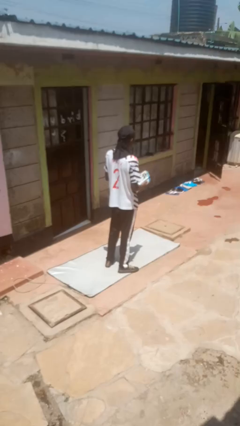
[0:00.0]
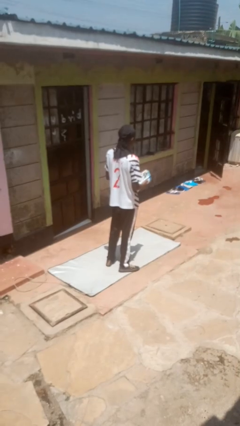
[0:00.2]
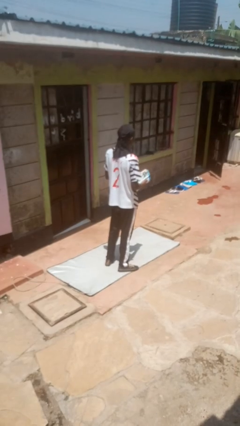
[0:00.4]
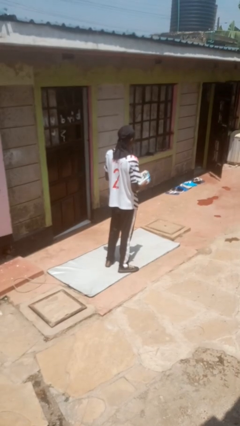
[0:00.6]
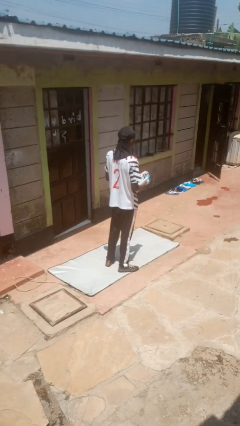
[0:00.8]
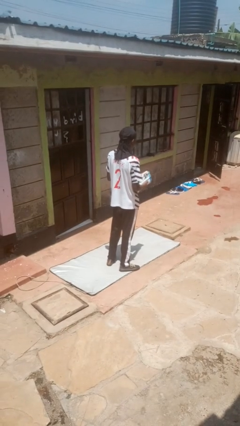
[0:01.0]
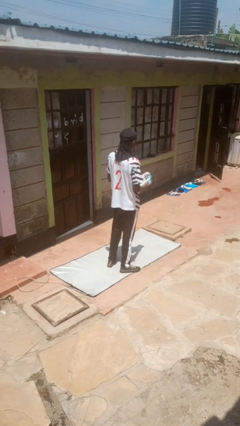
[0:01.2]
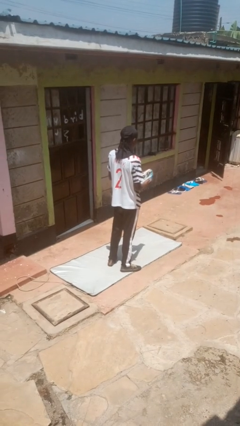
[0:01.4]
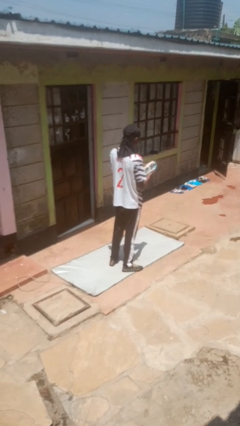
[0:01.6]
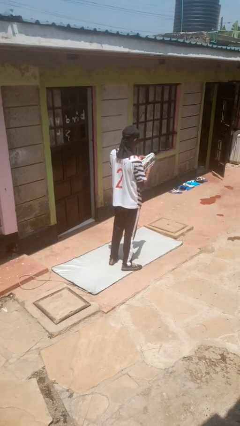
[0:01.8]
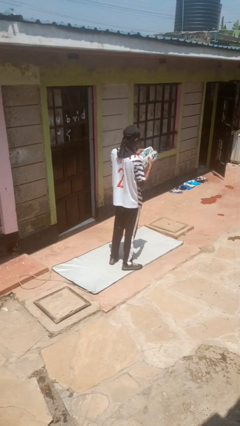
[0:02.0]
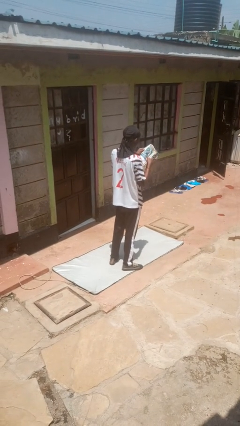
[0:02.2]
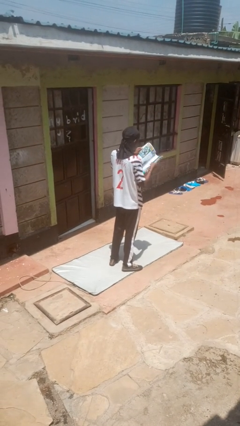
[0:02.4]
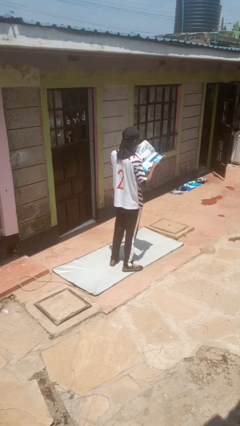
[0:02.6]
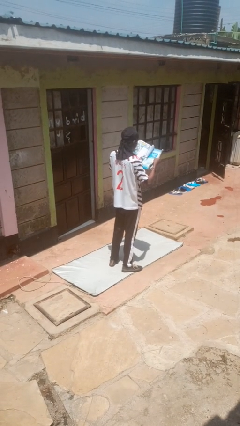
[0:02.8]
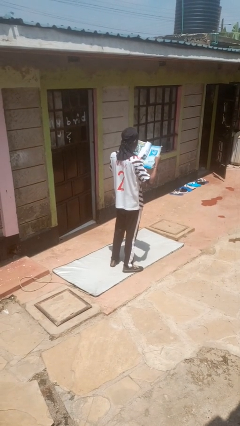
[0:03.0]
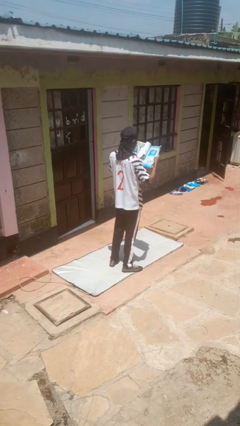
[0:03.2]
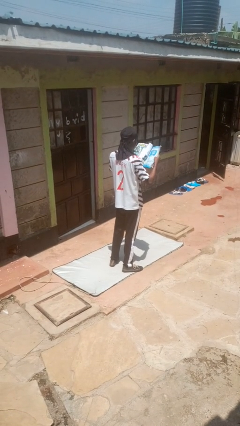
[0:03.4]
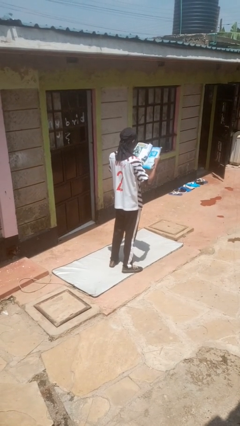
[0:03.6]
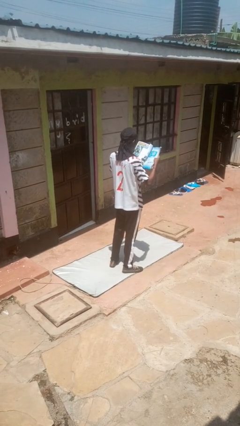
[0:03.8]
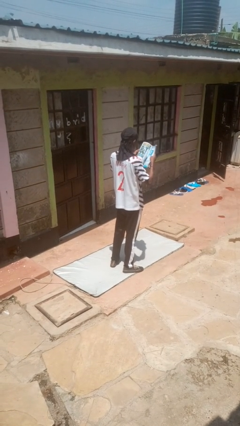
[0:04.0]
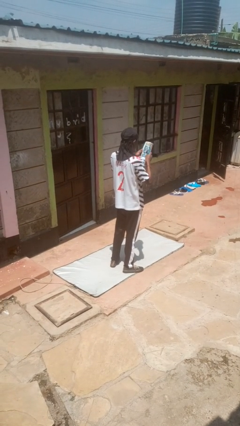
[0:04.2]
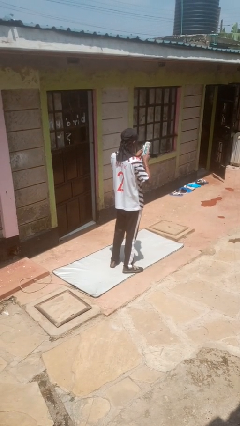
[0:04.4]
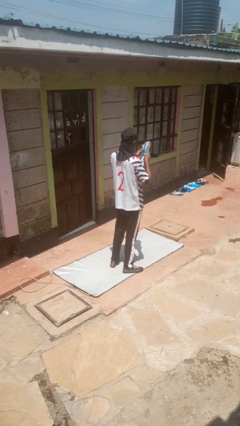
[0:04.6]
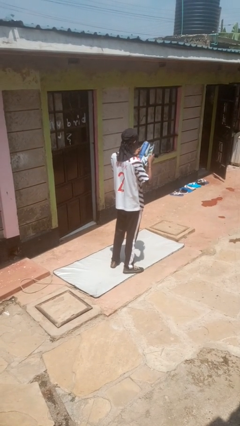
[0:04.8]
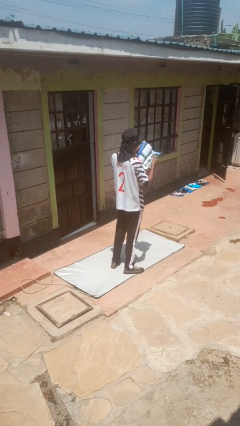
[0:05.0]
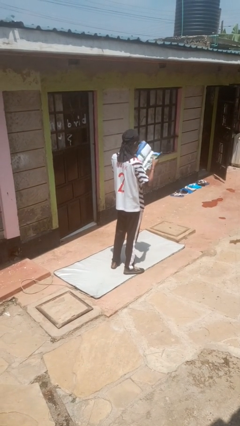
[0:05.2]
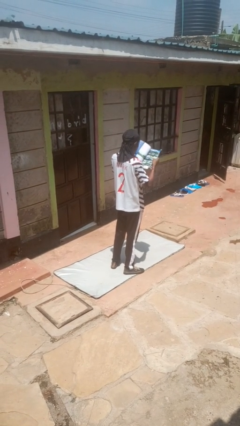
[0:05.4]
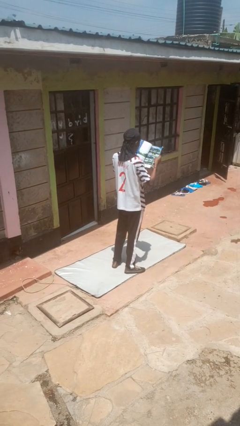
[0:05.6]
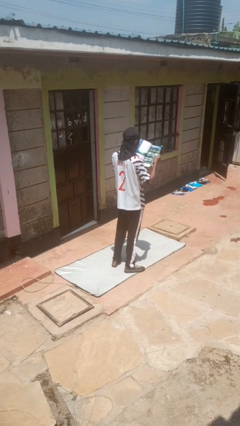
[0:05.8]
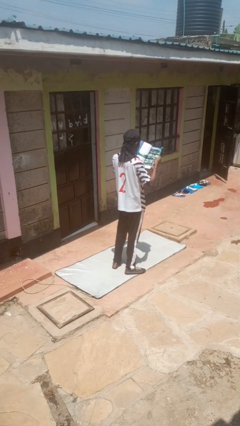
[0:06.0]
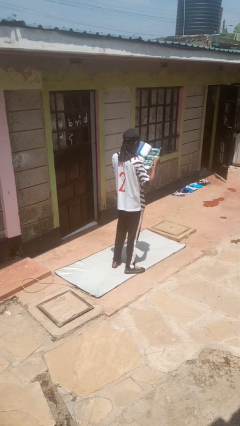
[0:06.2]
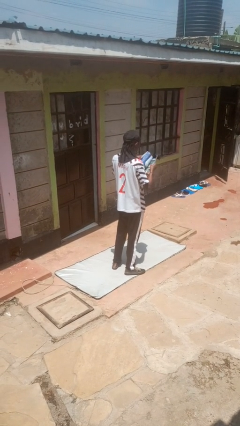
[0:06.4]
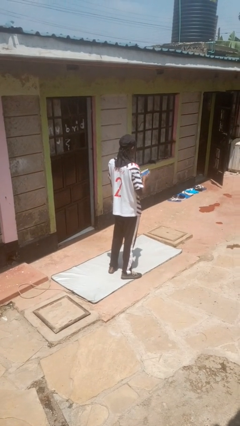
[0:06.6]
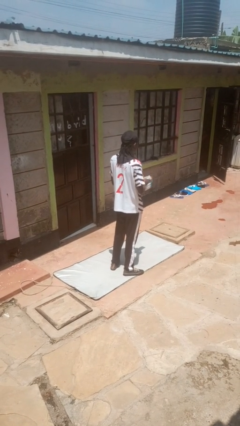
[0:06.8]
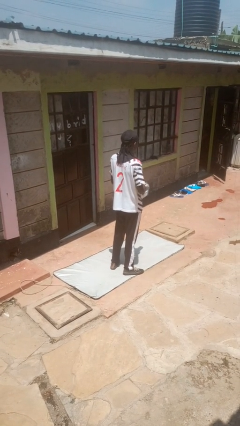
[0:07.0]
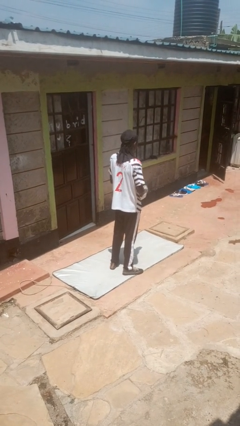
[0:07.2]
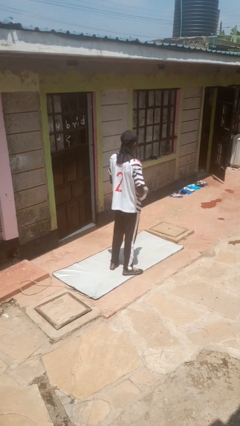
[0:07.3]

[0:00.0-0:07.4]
person reads magazine

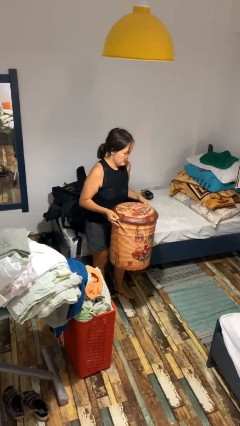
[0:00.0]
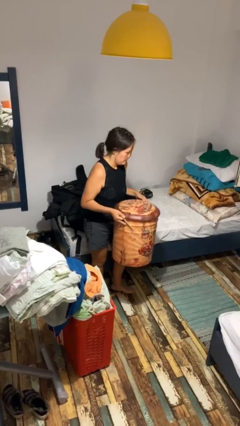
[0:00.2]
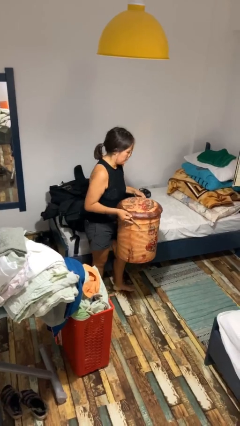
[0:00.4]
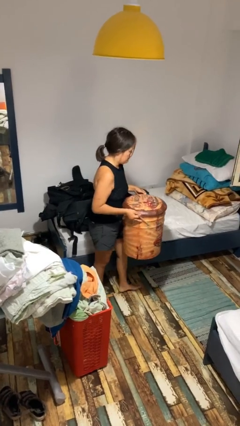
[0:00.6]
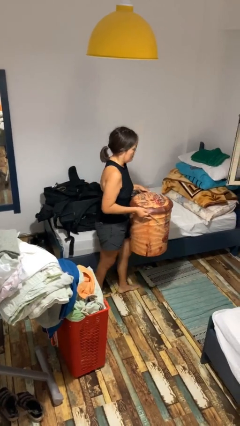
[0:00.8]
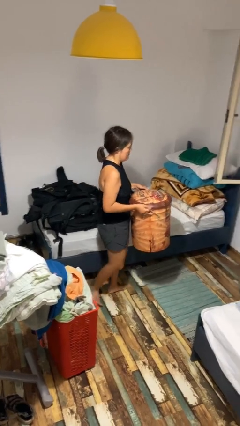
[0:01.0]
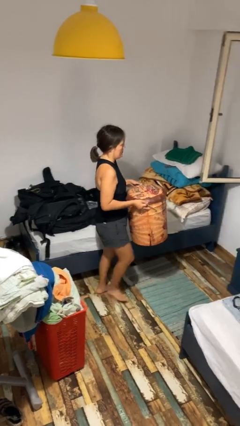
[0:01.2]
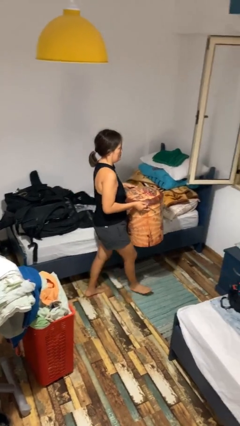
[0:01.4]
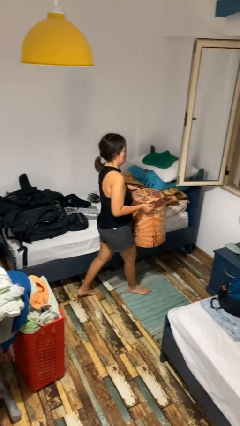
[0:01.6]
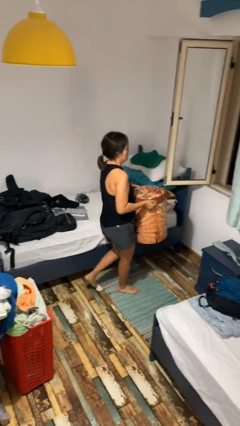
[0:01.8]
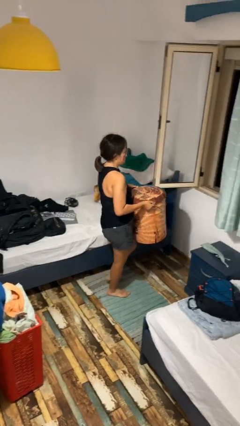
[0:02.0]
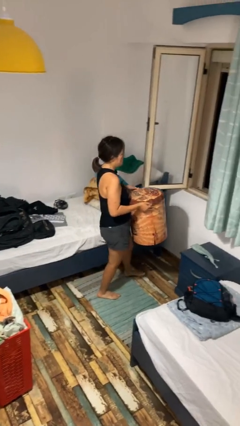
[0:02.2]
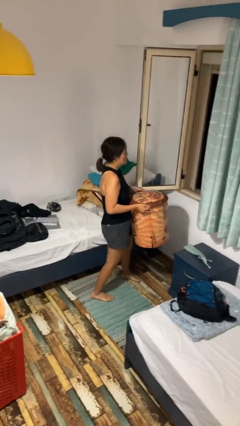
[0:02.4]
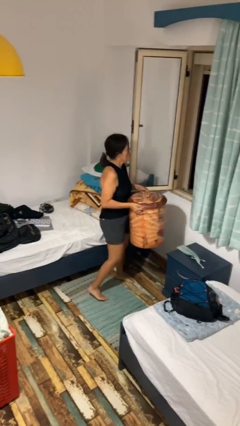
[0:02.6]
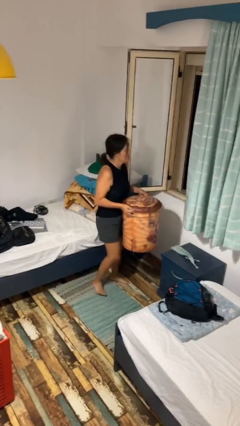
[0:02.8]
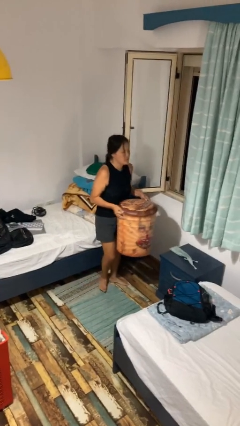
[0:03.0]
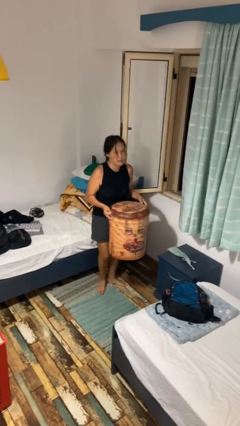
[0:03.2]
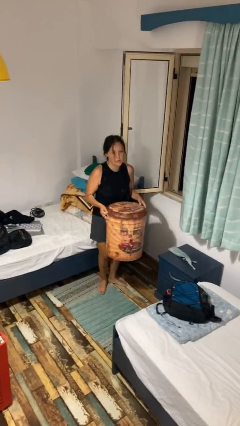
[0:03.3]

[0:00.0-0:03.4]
person carries furniture

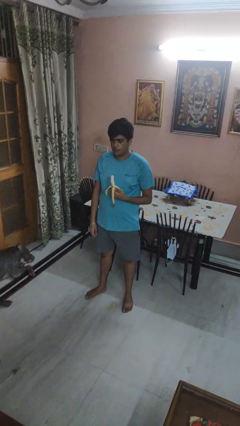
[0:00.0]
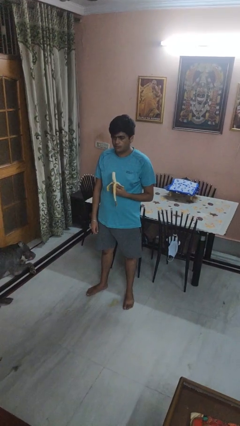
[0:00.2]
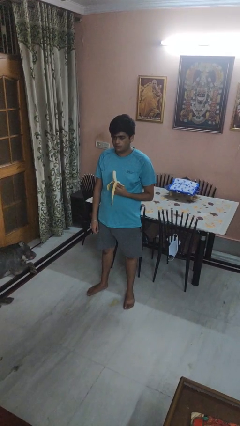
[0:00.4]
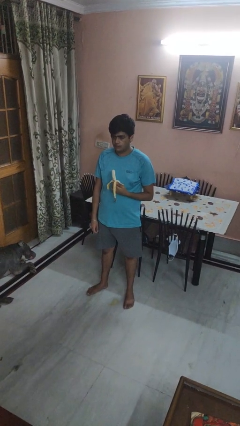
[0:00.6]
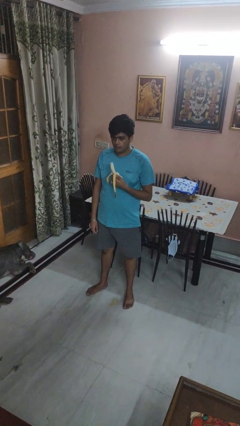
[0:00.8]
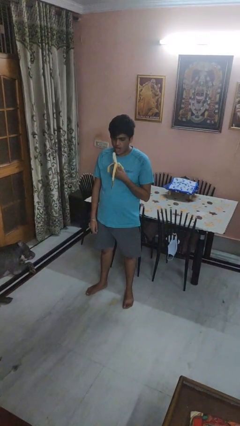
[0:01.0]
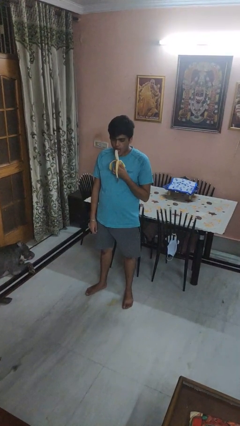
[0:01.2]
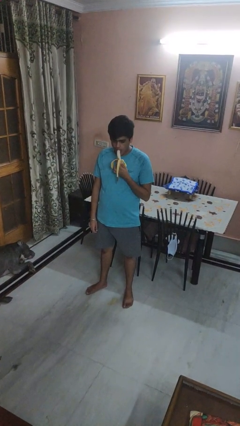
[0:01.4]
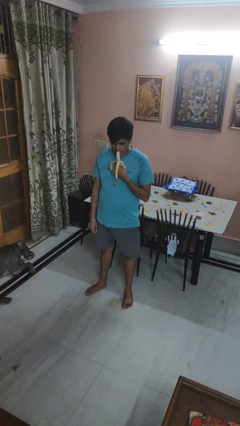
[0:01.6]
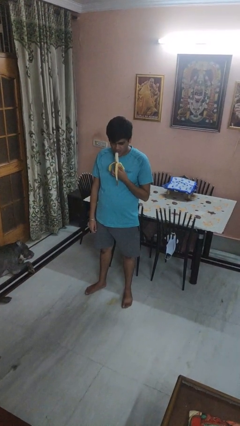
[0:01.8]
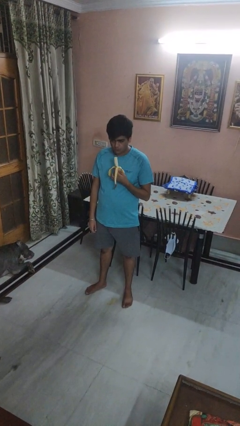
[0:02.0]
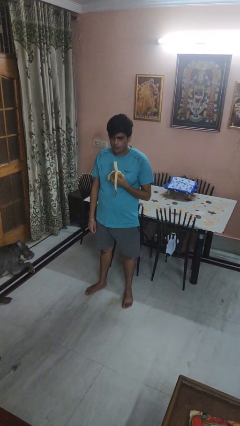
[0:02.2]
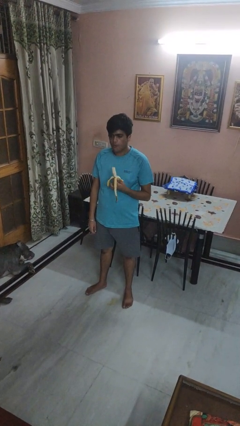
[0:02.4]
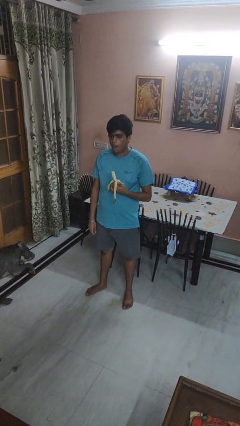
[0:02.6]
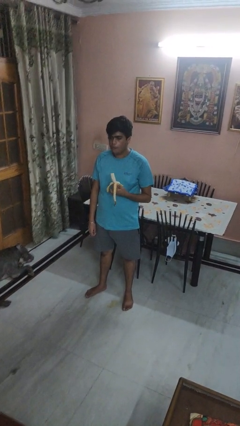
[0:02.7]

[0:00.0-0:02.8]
person eats banana

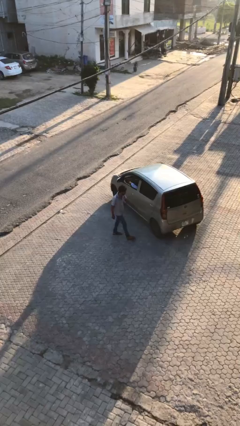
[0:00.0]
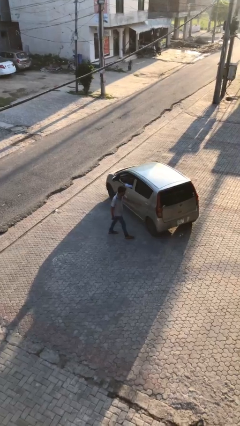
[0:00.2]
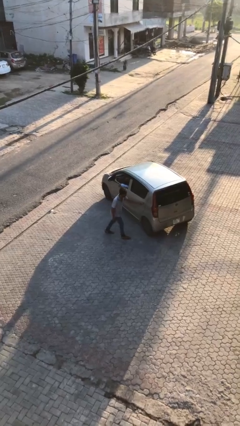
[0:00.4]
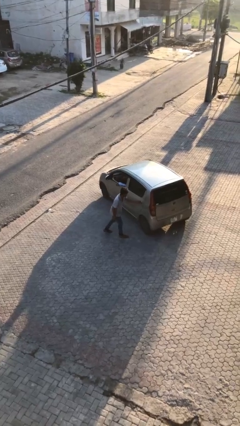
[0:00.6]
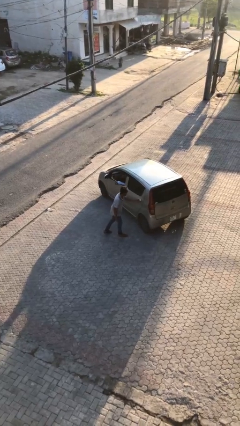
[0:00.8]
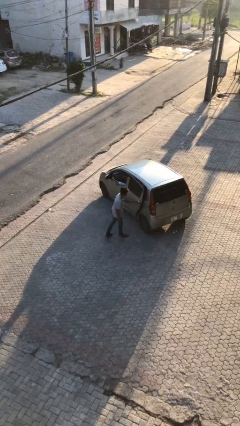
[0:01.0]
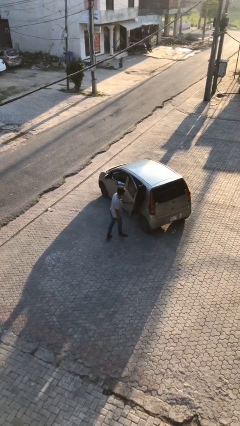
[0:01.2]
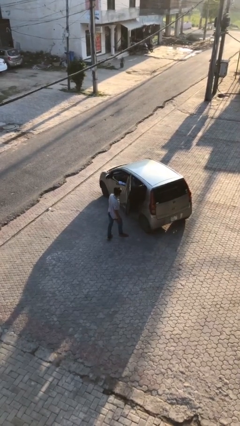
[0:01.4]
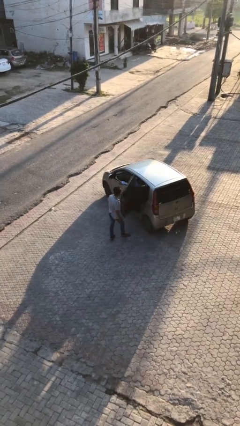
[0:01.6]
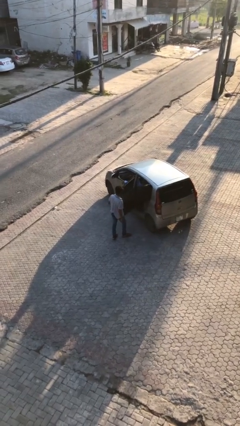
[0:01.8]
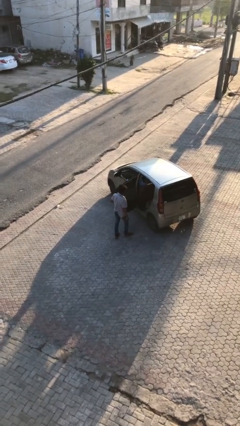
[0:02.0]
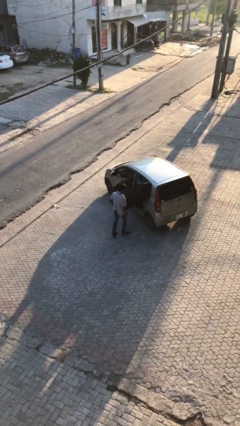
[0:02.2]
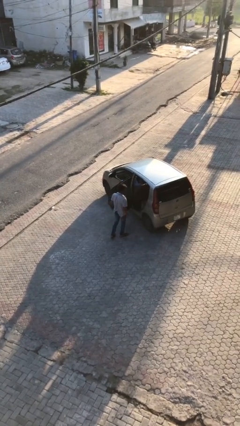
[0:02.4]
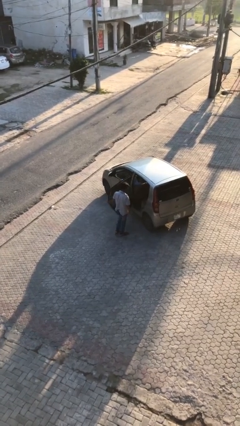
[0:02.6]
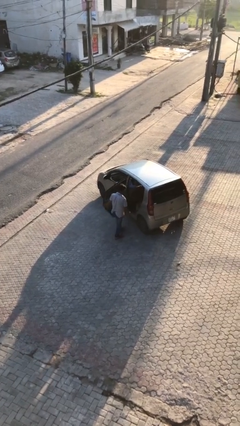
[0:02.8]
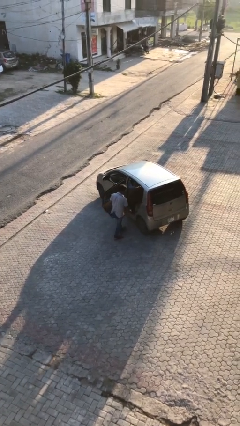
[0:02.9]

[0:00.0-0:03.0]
person opens car door

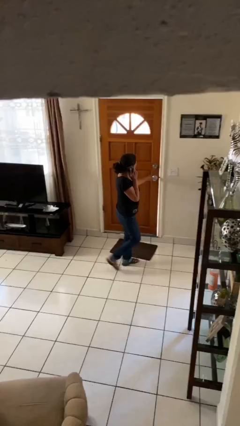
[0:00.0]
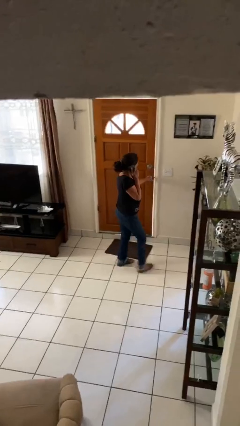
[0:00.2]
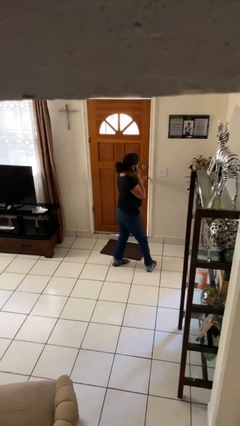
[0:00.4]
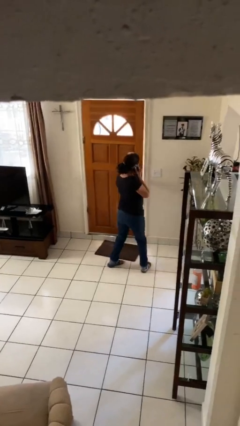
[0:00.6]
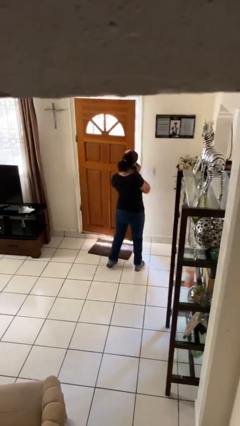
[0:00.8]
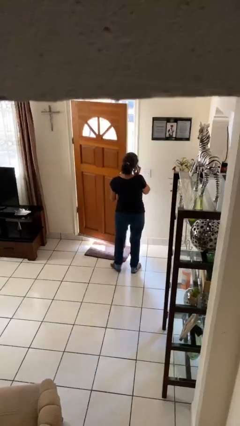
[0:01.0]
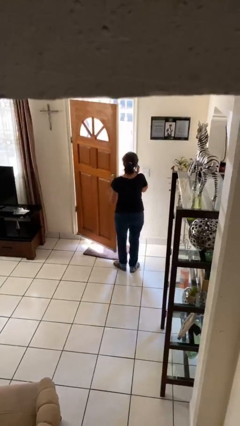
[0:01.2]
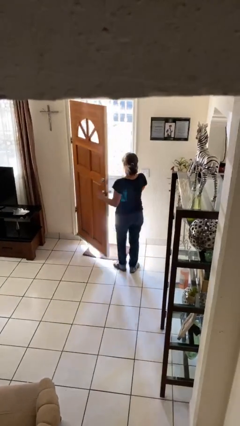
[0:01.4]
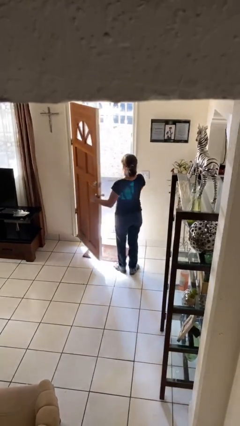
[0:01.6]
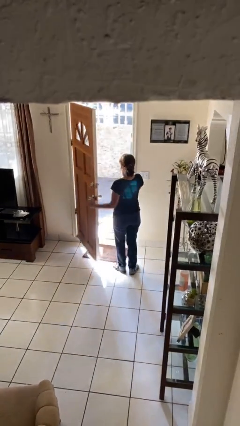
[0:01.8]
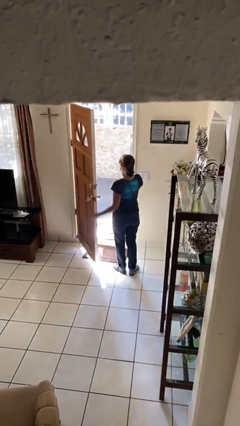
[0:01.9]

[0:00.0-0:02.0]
person opens facility door
